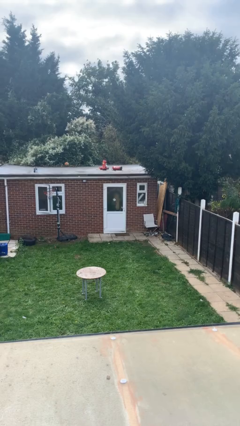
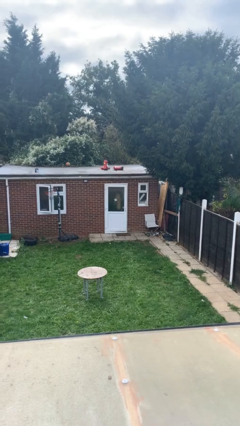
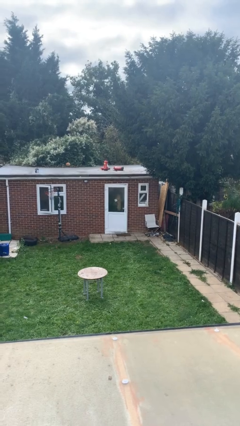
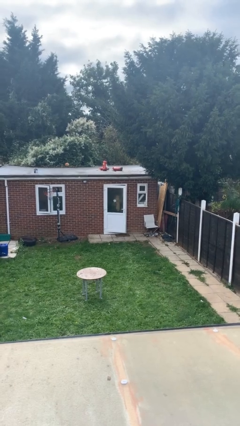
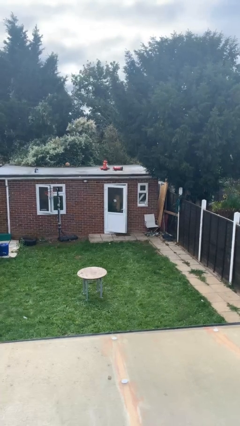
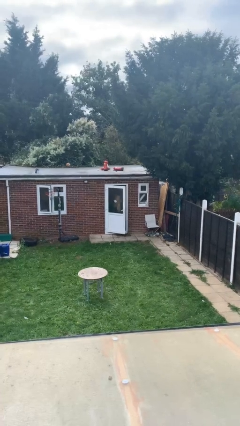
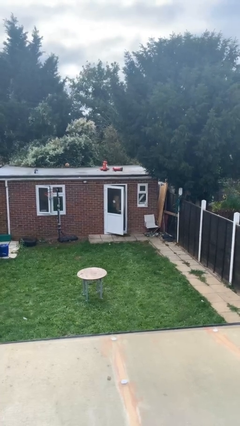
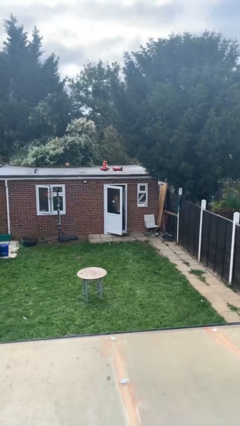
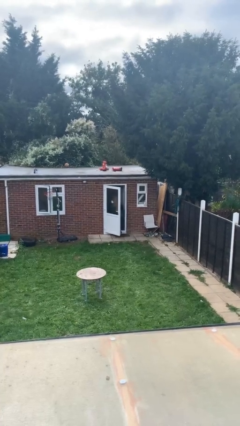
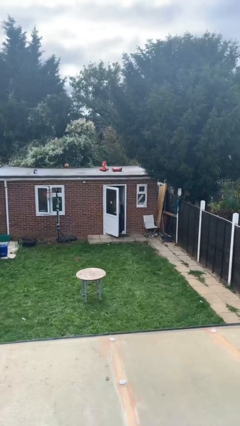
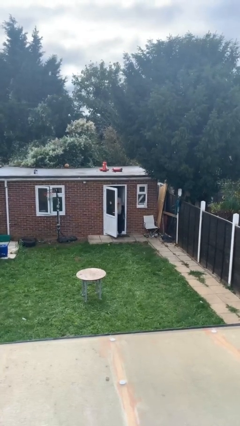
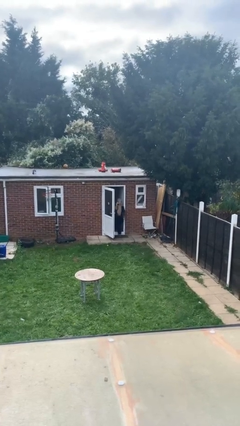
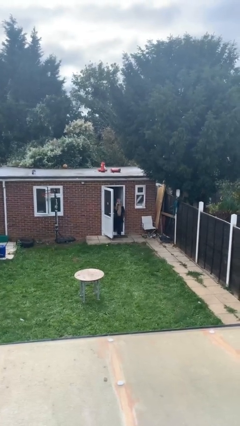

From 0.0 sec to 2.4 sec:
person opens facility door

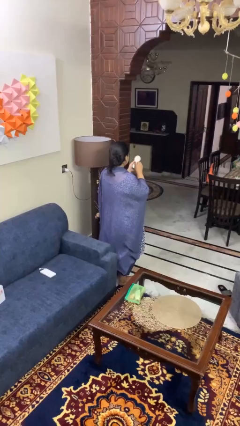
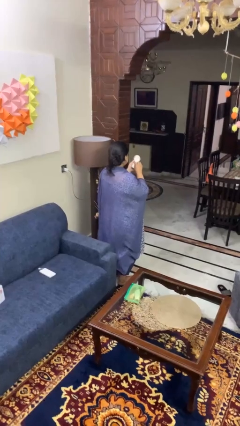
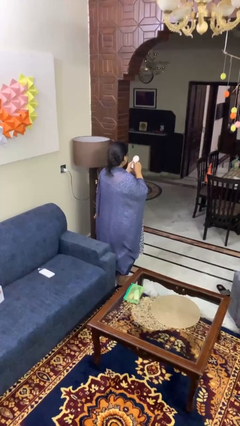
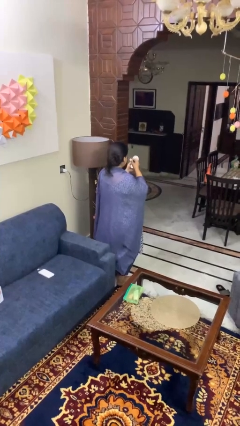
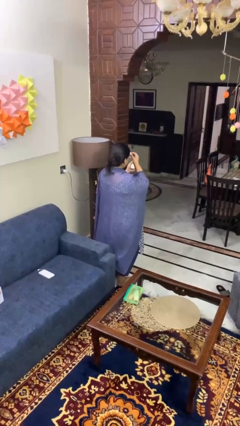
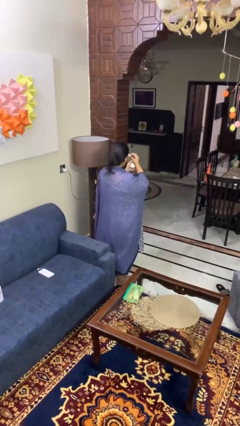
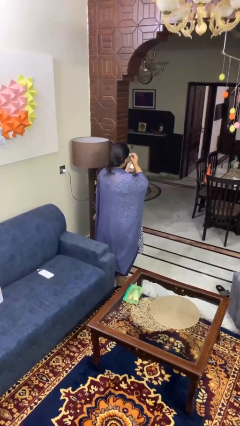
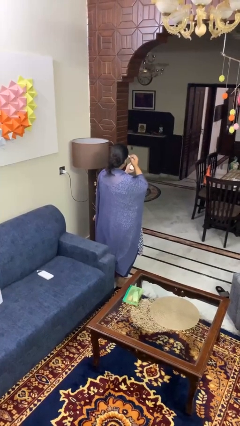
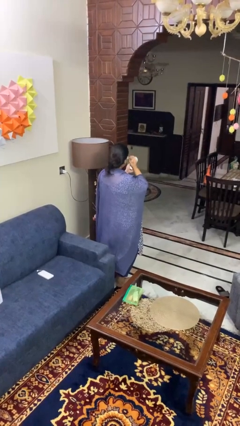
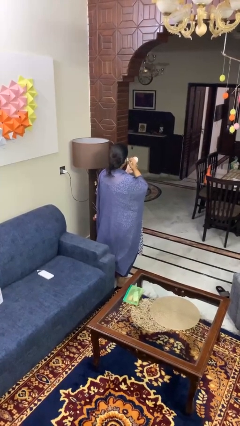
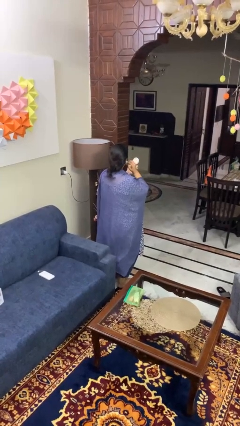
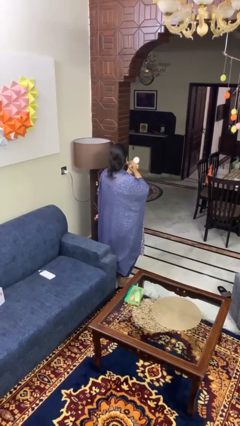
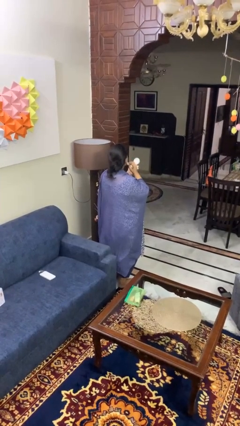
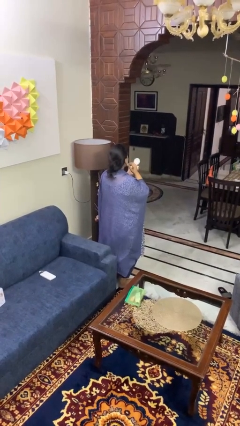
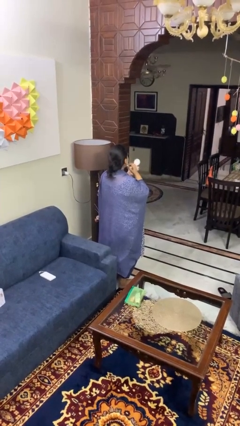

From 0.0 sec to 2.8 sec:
person applies foundation makeup

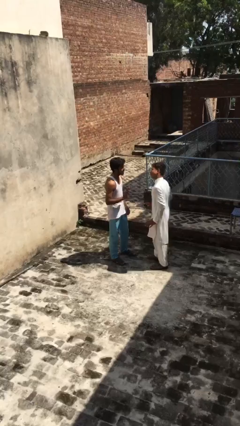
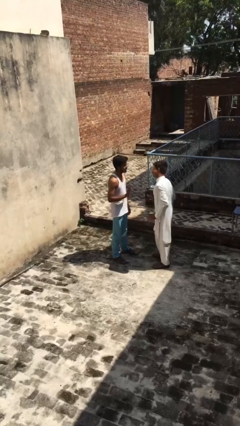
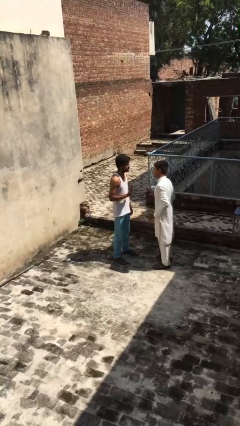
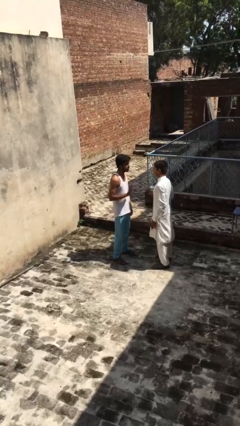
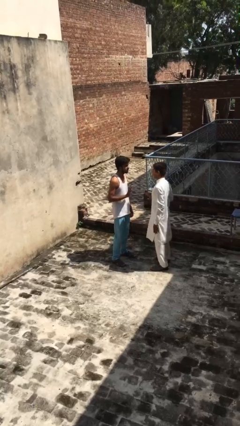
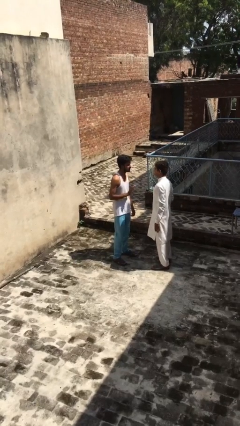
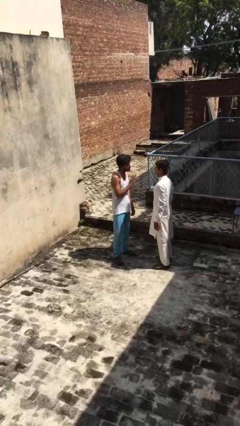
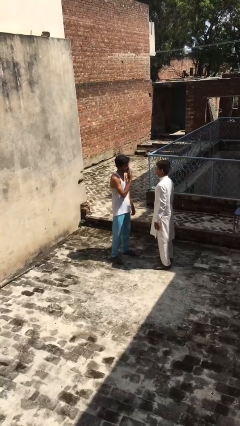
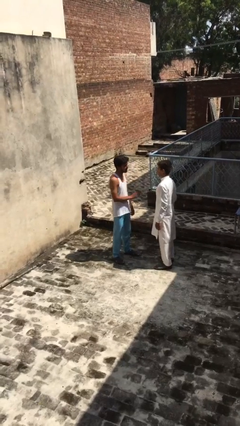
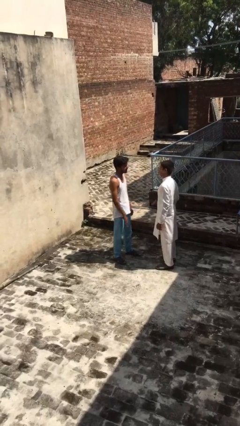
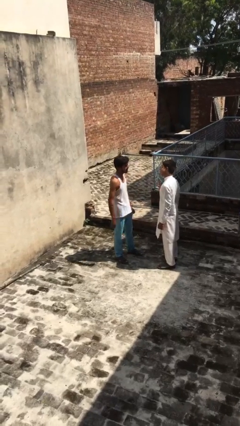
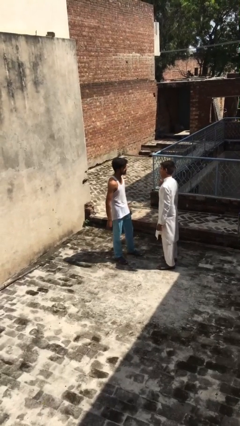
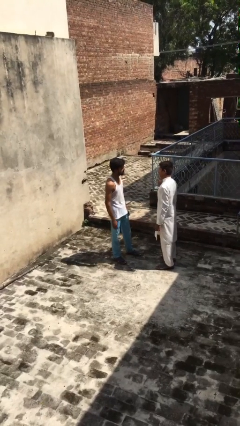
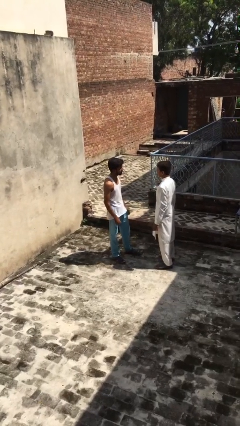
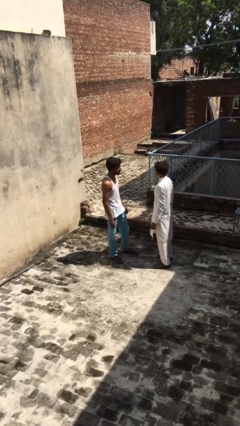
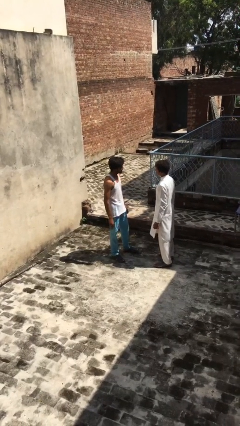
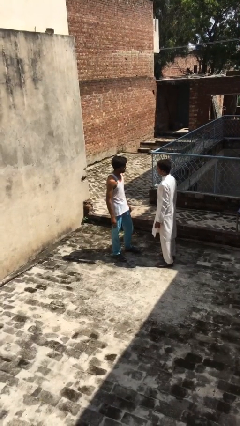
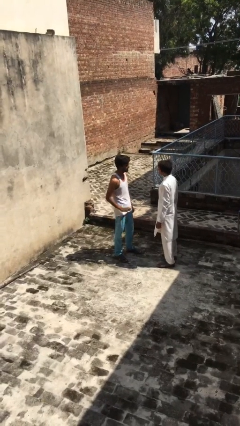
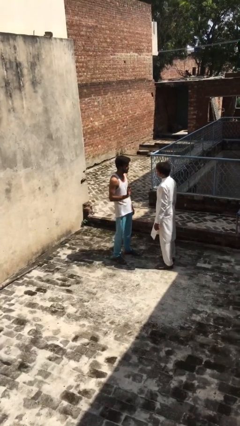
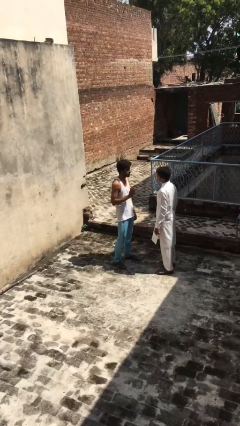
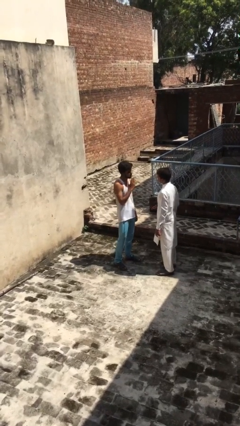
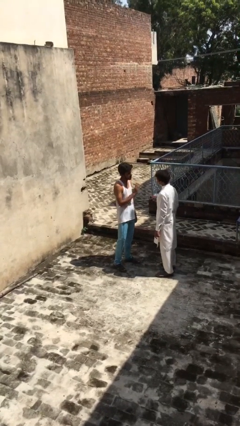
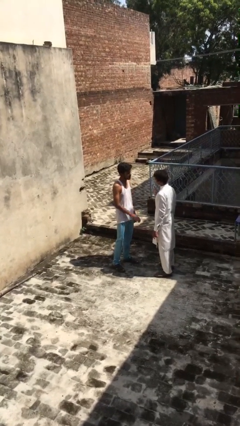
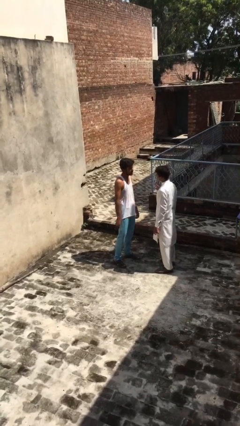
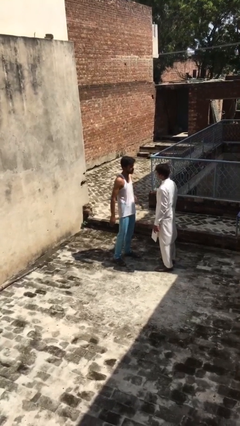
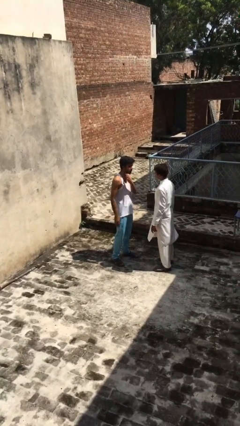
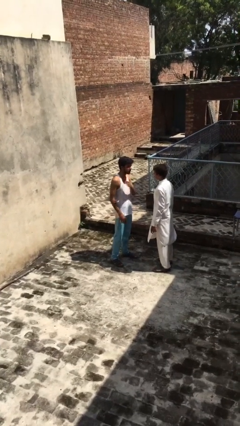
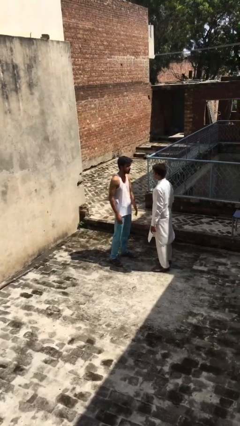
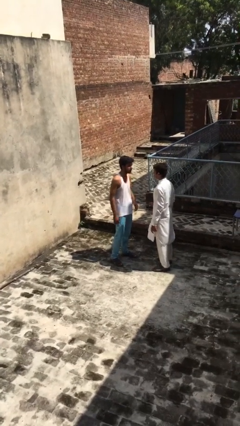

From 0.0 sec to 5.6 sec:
person talks to person

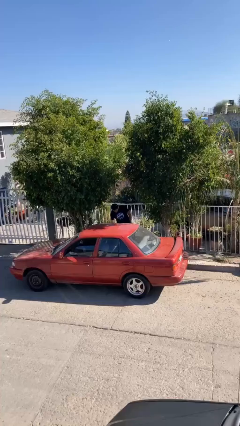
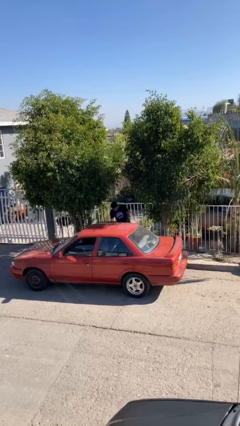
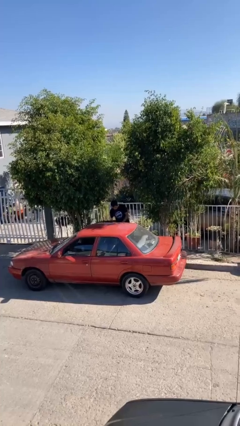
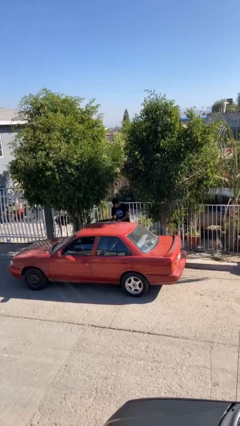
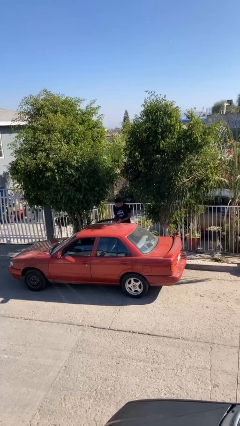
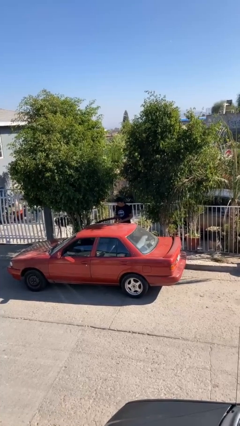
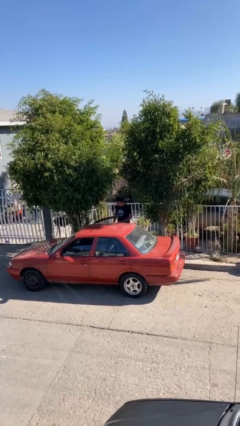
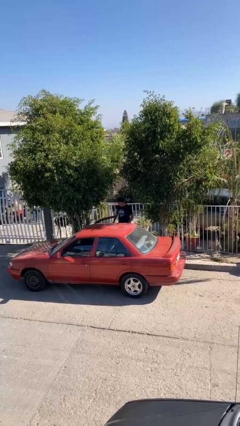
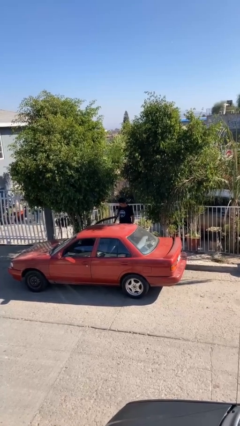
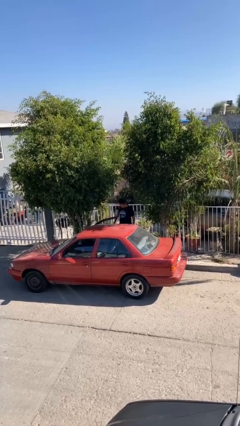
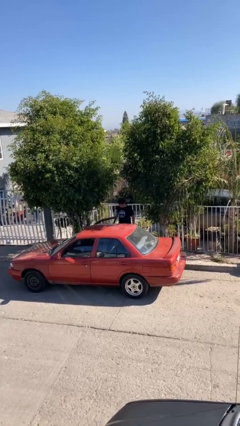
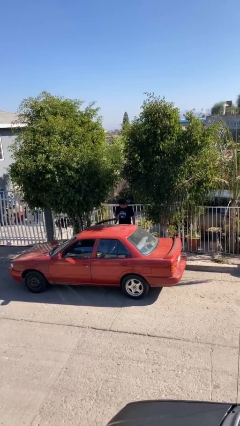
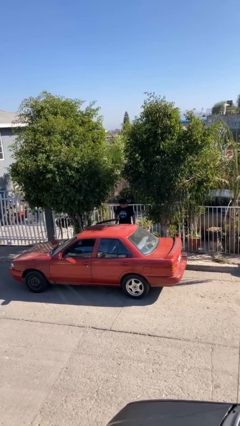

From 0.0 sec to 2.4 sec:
person opens car door

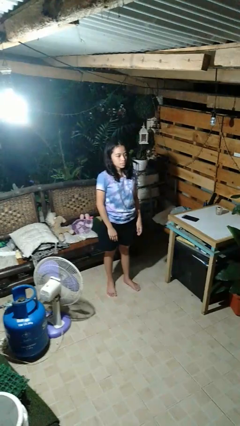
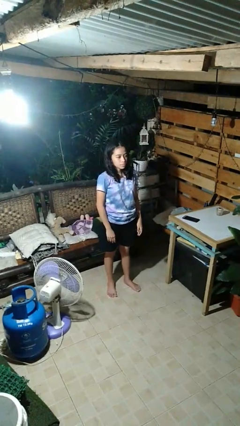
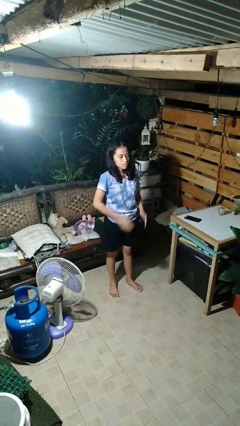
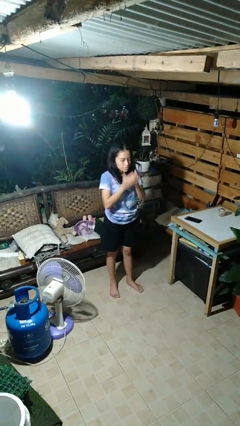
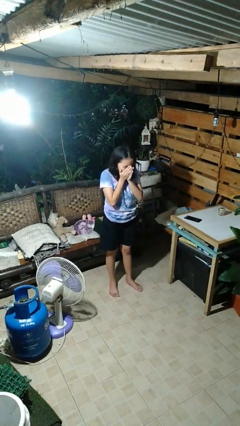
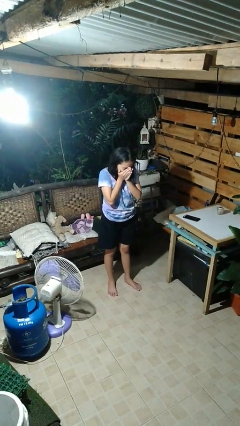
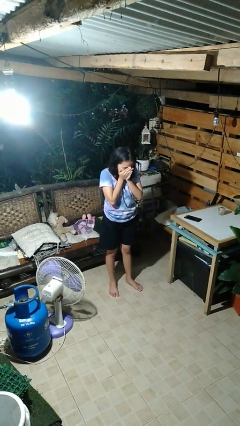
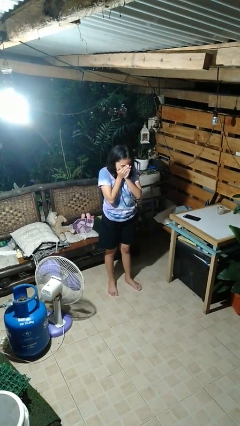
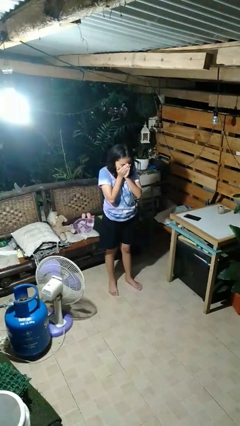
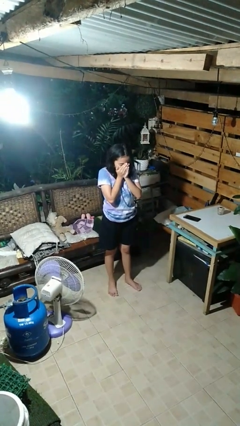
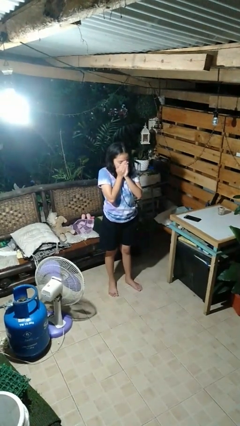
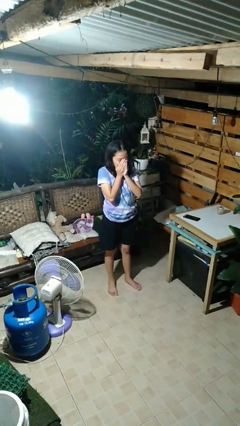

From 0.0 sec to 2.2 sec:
person sneezes into hand

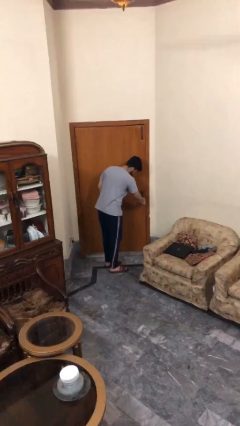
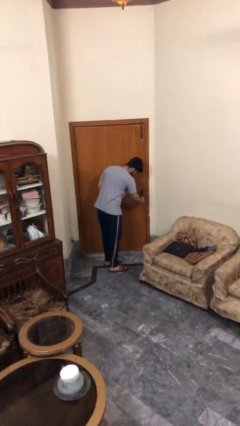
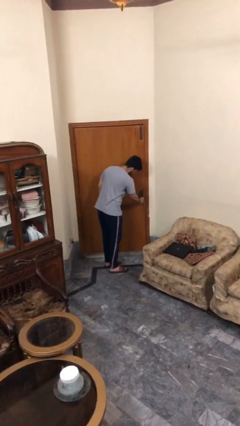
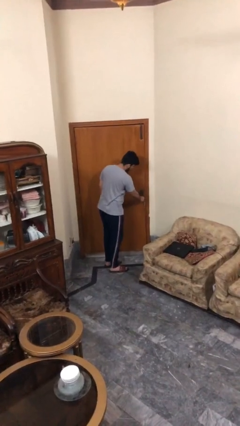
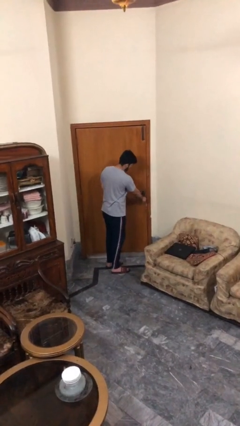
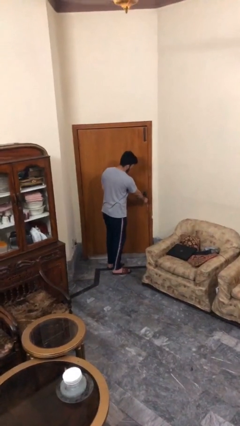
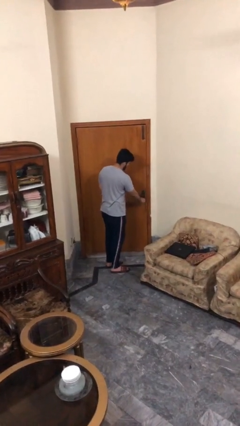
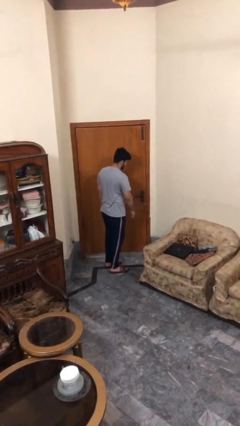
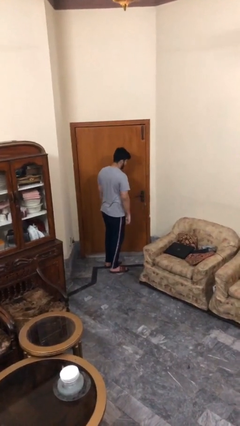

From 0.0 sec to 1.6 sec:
person locks door with keys

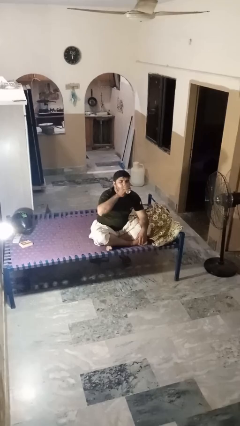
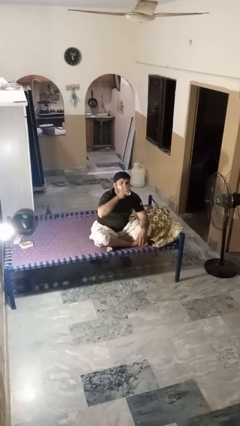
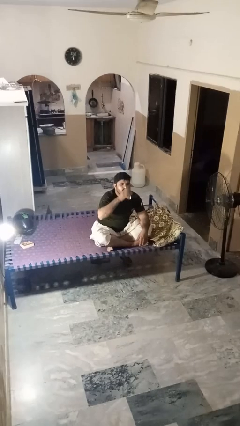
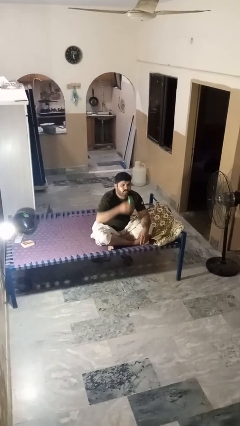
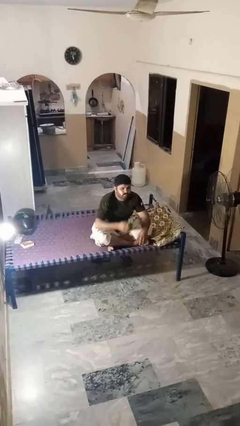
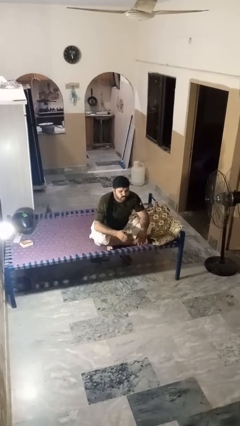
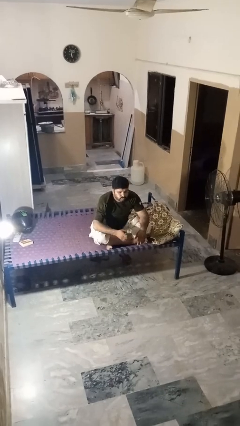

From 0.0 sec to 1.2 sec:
person drinks from beverage can
